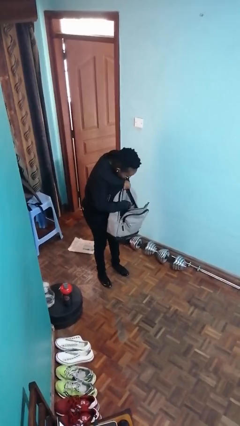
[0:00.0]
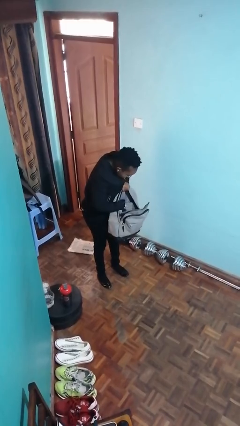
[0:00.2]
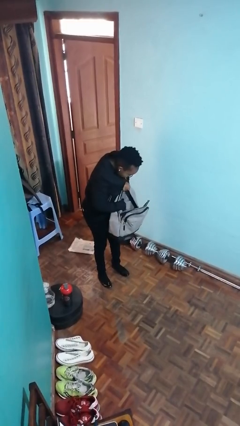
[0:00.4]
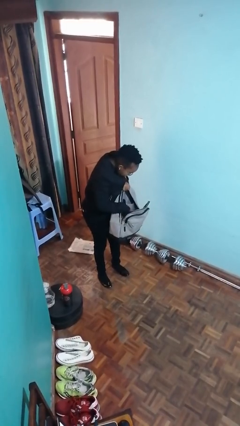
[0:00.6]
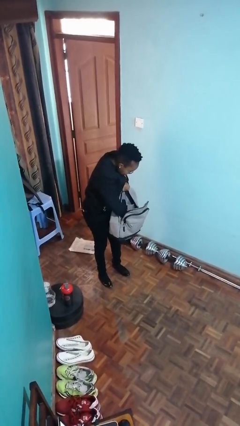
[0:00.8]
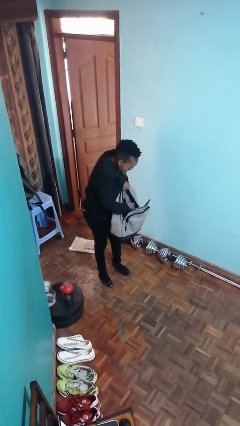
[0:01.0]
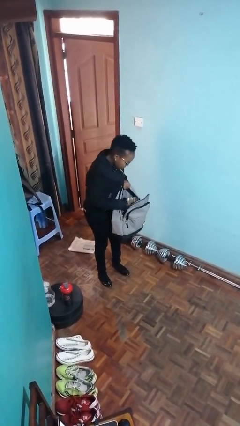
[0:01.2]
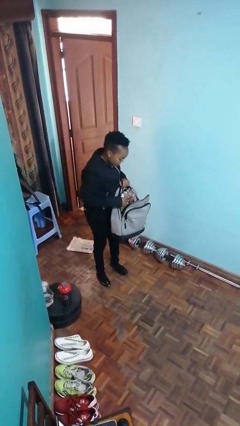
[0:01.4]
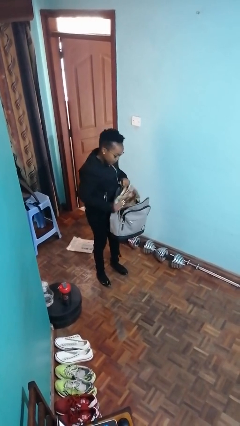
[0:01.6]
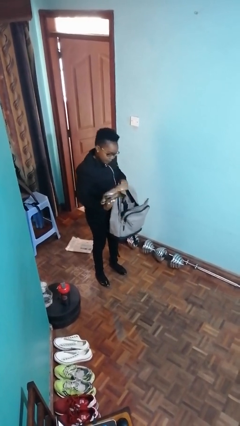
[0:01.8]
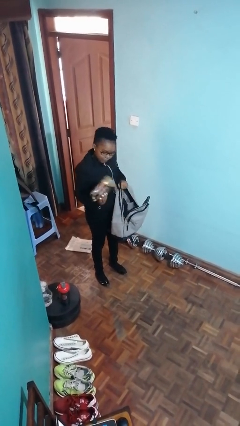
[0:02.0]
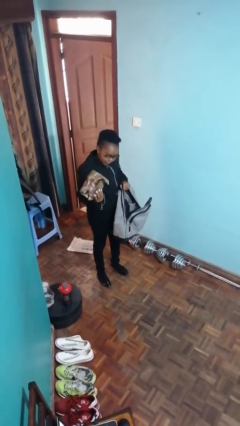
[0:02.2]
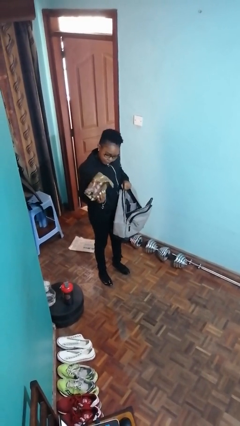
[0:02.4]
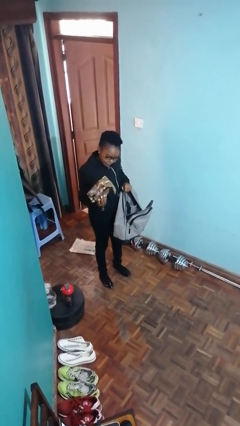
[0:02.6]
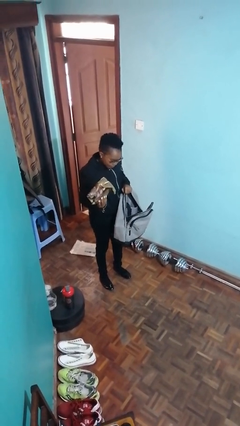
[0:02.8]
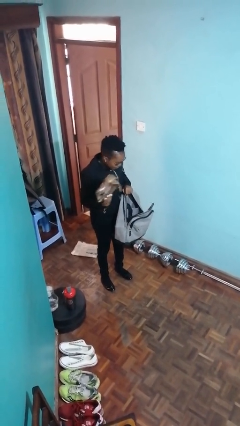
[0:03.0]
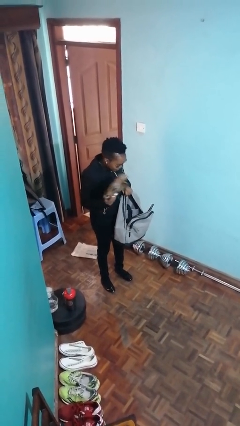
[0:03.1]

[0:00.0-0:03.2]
person takes object from backpack

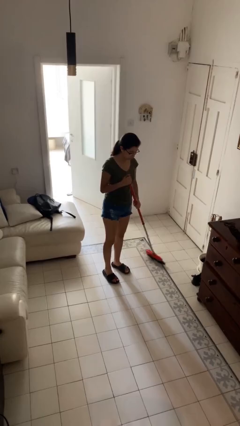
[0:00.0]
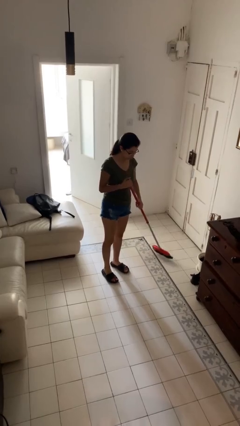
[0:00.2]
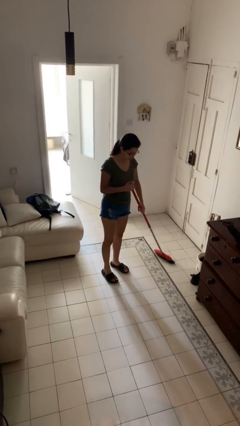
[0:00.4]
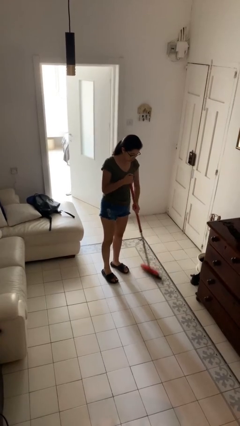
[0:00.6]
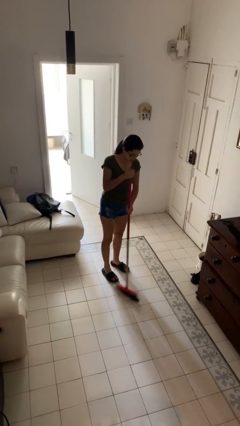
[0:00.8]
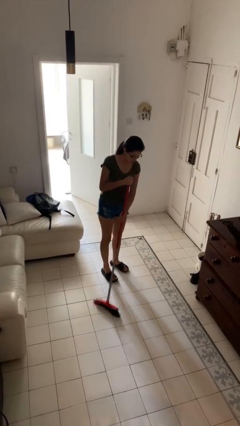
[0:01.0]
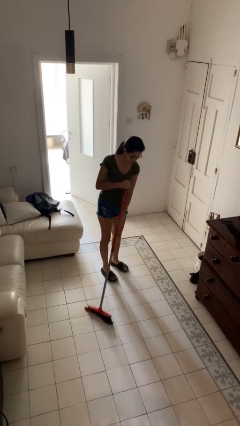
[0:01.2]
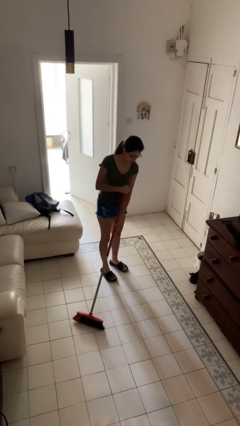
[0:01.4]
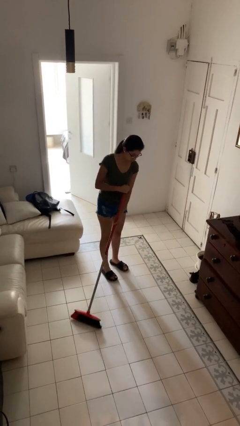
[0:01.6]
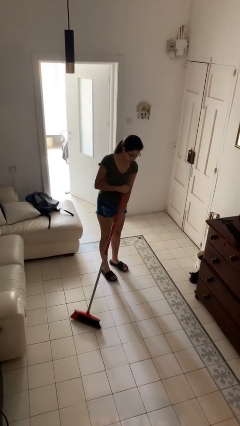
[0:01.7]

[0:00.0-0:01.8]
person sweeps floor

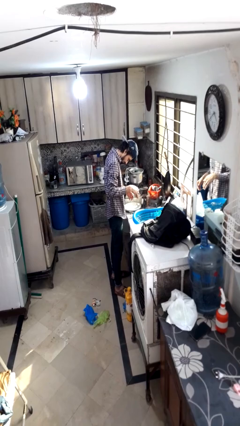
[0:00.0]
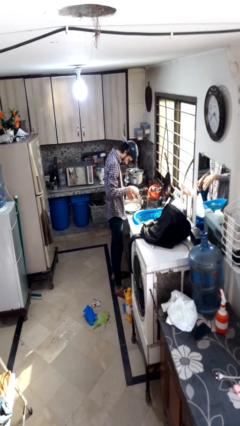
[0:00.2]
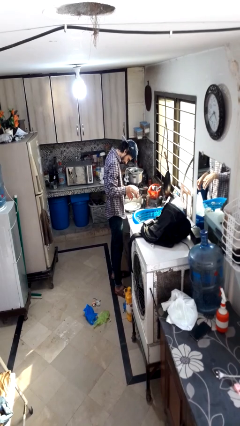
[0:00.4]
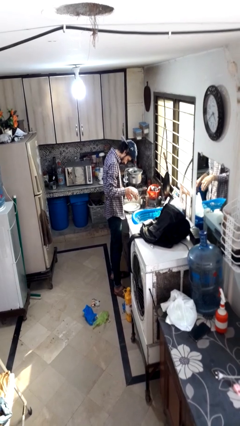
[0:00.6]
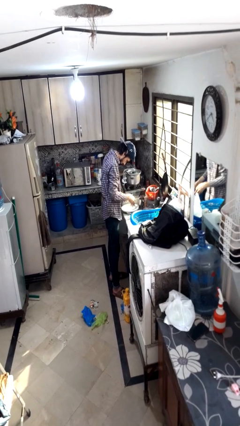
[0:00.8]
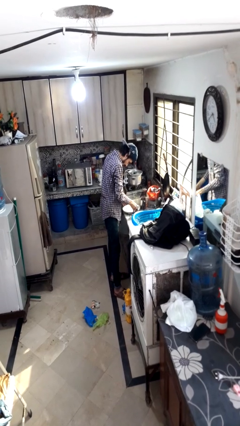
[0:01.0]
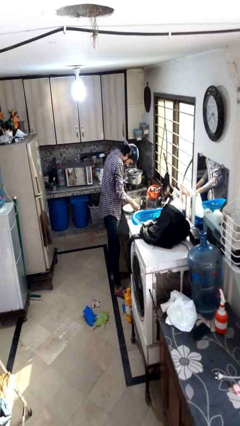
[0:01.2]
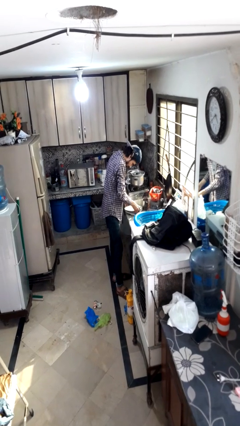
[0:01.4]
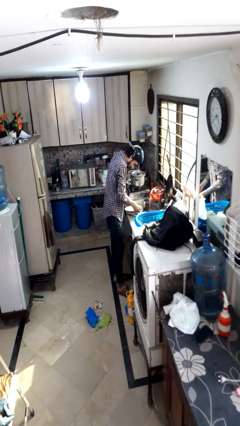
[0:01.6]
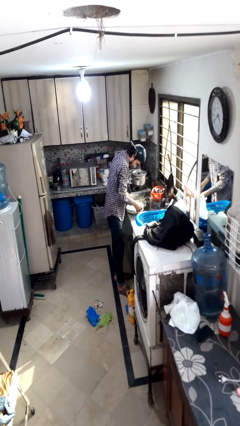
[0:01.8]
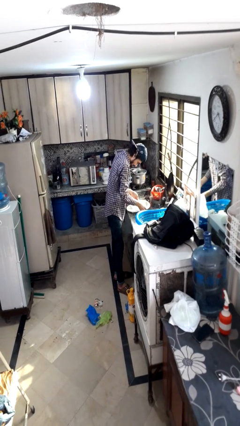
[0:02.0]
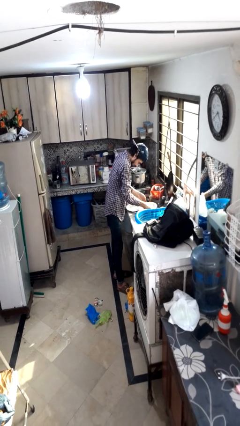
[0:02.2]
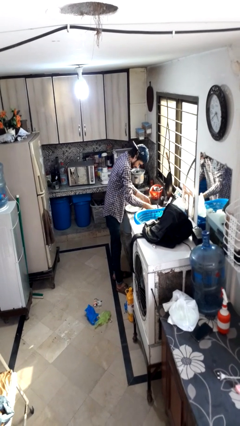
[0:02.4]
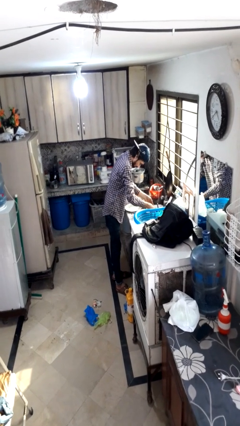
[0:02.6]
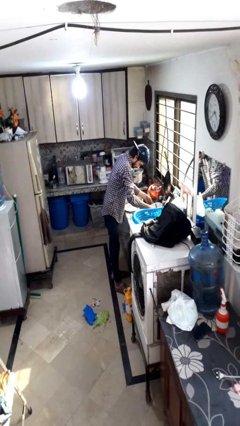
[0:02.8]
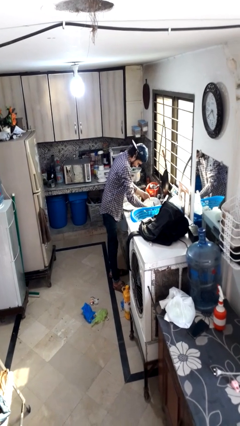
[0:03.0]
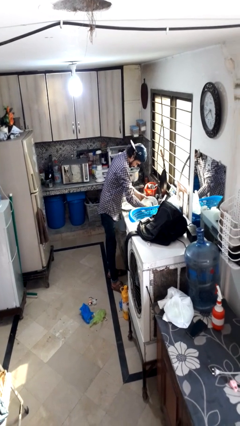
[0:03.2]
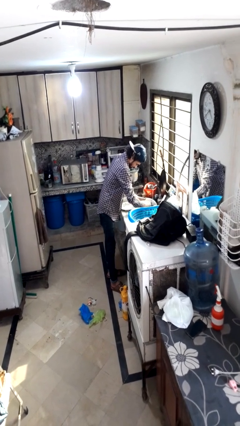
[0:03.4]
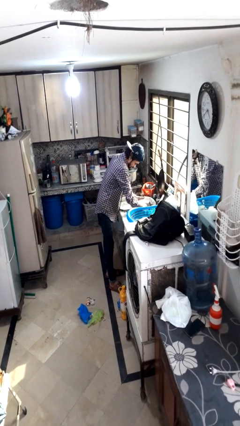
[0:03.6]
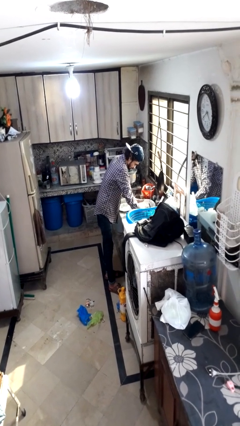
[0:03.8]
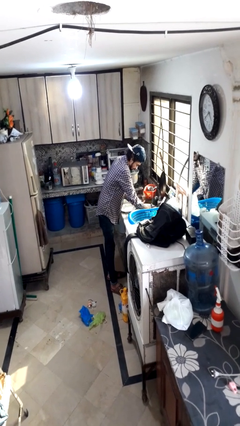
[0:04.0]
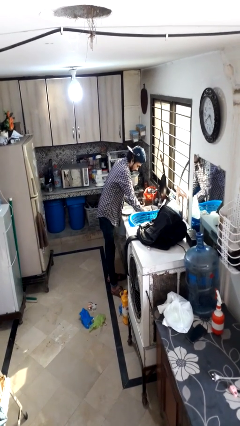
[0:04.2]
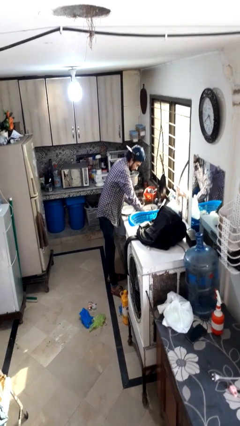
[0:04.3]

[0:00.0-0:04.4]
person washes dish

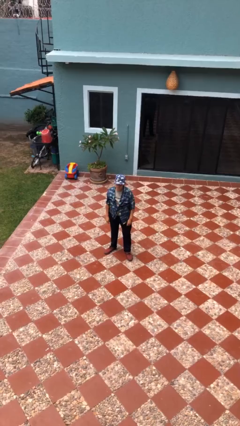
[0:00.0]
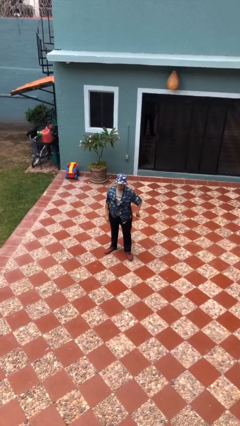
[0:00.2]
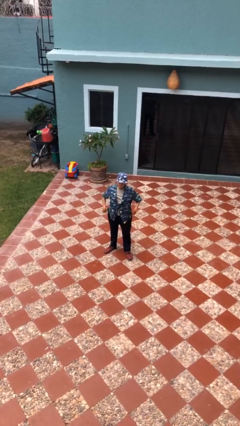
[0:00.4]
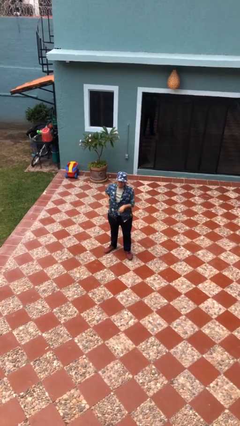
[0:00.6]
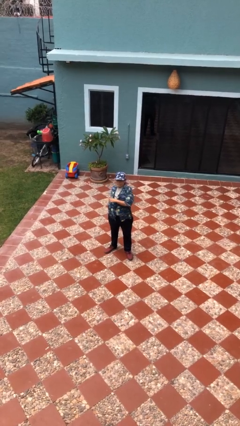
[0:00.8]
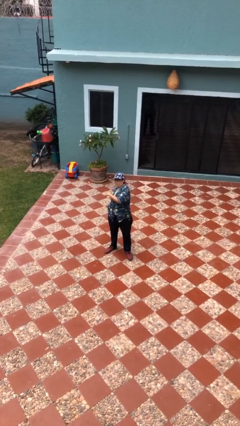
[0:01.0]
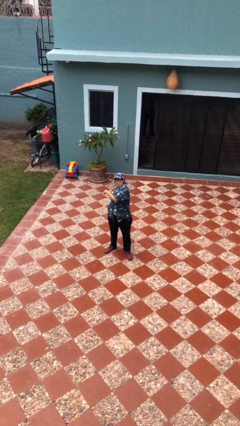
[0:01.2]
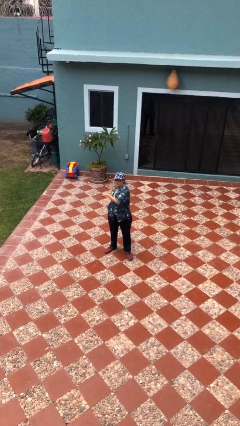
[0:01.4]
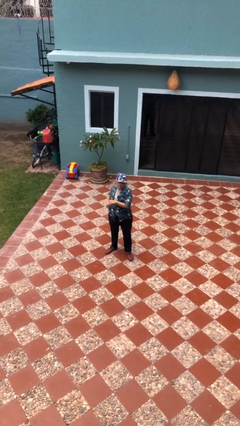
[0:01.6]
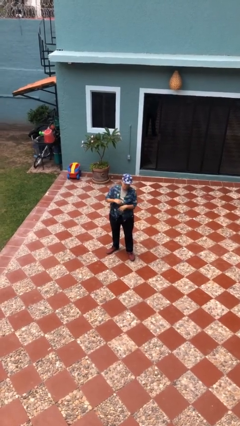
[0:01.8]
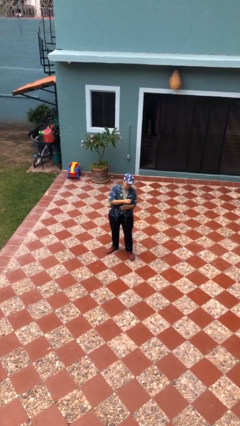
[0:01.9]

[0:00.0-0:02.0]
person stretches back

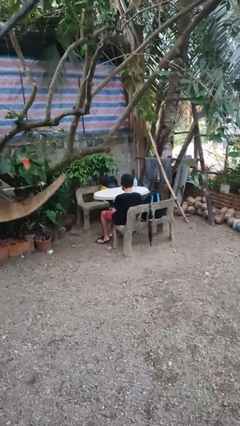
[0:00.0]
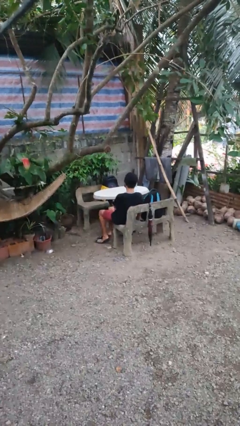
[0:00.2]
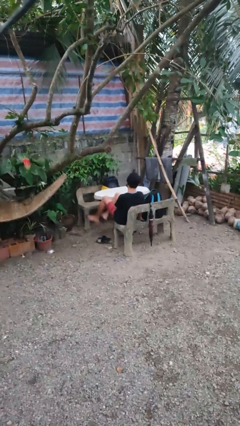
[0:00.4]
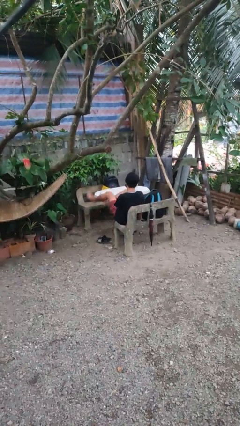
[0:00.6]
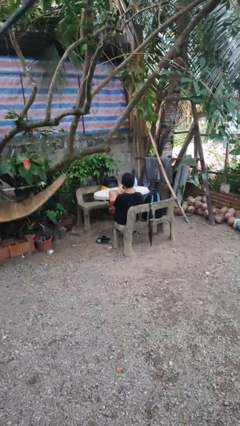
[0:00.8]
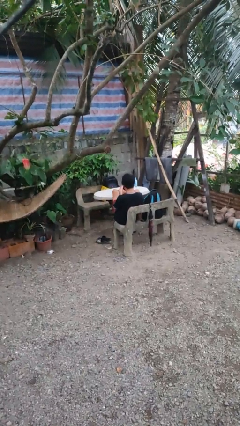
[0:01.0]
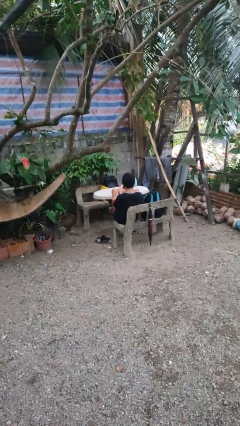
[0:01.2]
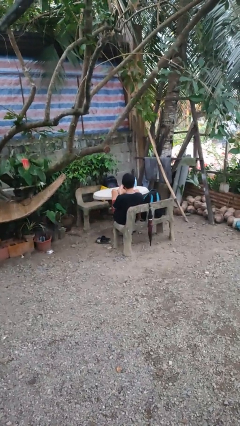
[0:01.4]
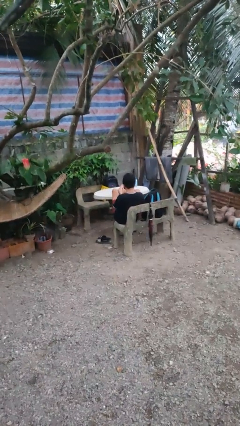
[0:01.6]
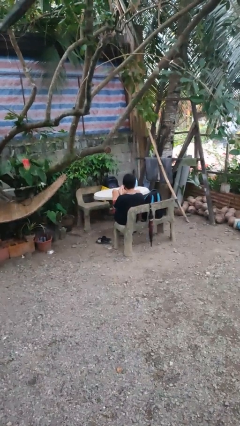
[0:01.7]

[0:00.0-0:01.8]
person puts feet up

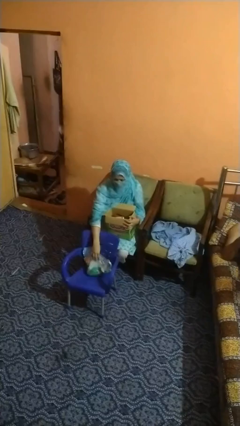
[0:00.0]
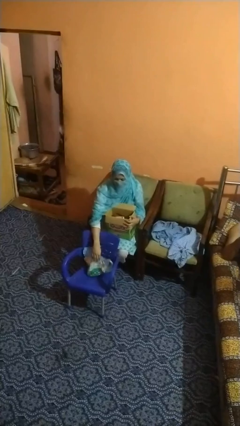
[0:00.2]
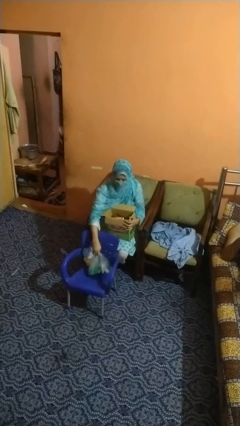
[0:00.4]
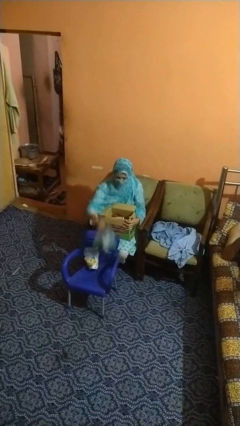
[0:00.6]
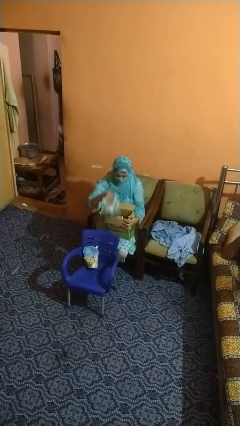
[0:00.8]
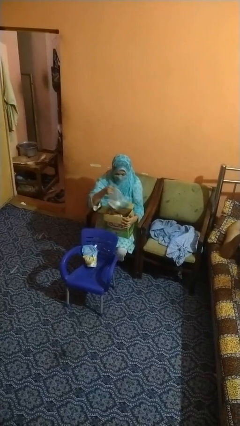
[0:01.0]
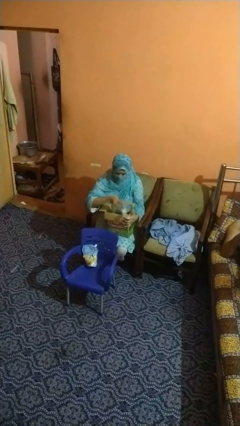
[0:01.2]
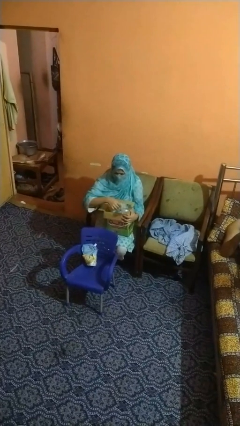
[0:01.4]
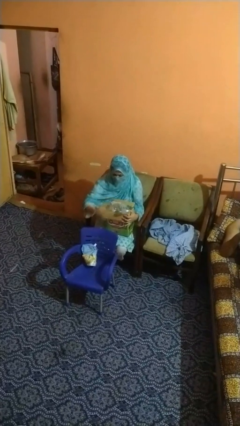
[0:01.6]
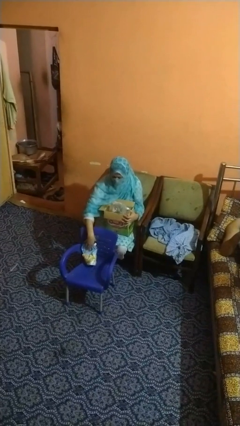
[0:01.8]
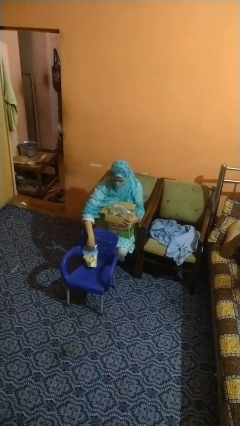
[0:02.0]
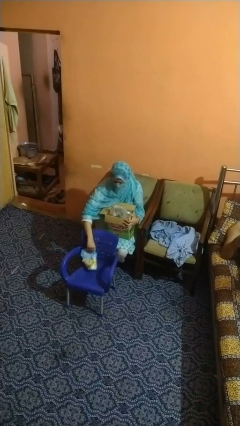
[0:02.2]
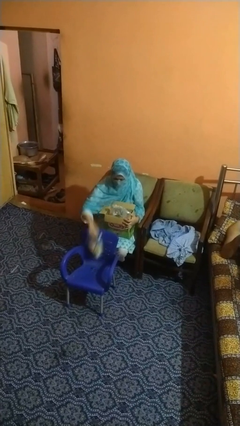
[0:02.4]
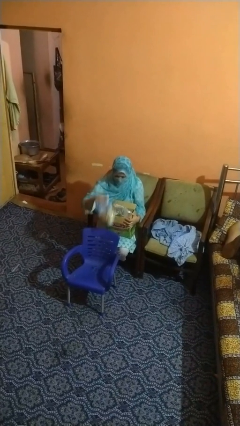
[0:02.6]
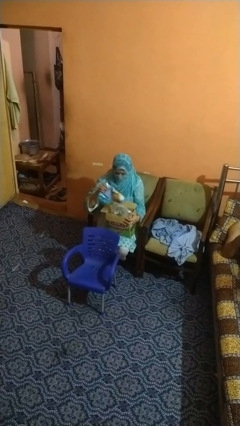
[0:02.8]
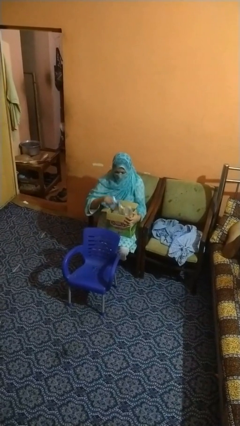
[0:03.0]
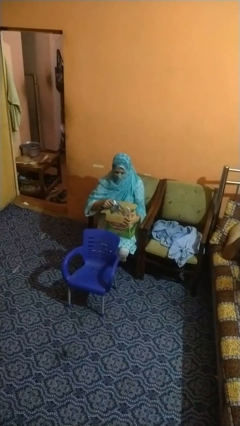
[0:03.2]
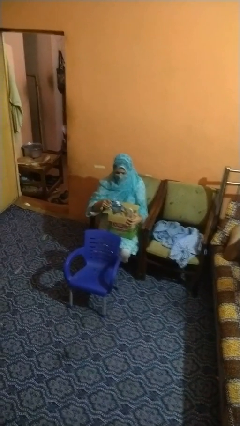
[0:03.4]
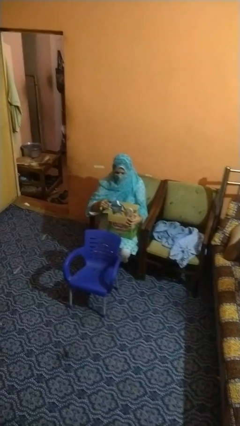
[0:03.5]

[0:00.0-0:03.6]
person puts object into box

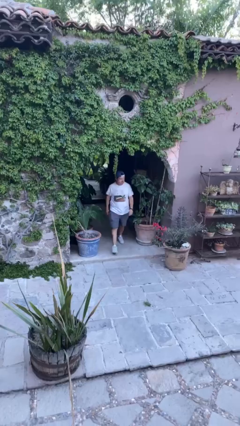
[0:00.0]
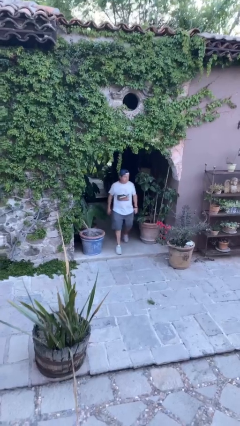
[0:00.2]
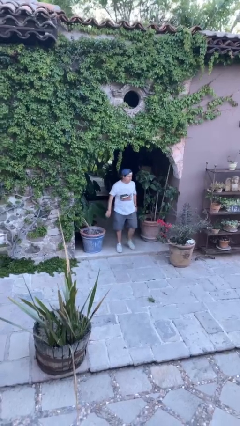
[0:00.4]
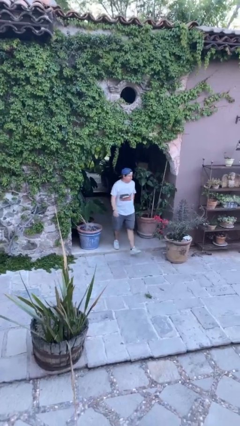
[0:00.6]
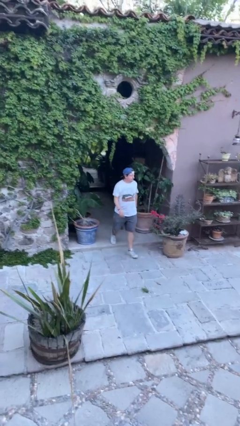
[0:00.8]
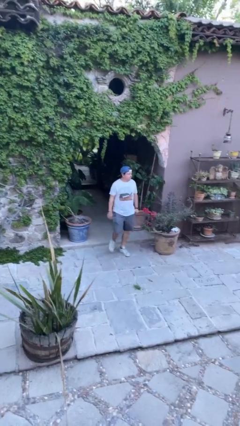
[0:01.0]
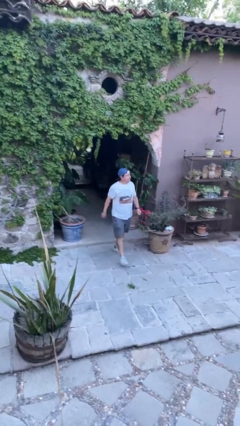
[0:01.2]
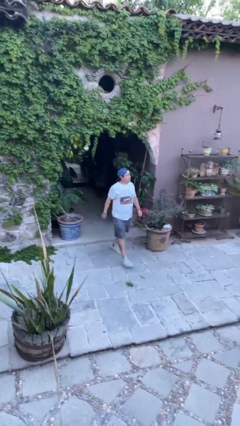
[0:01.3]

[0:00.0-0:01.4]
person enters scene through structure
